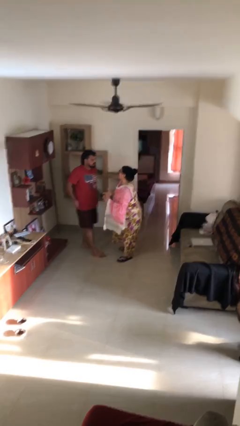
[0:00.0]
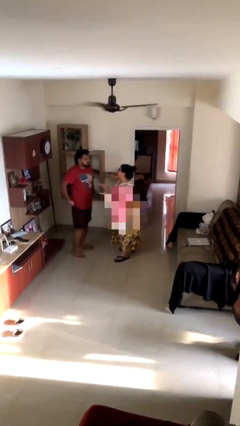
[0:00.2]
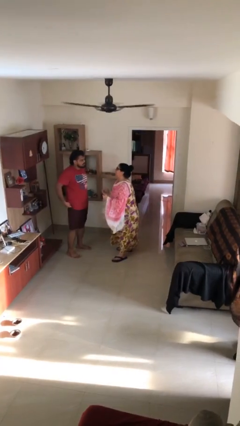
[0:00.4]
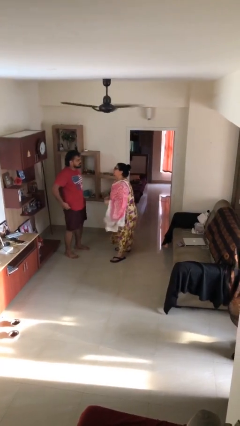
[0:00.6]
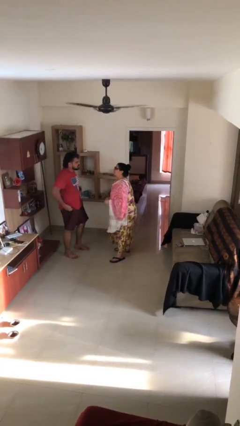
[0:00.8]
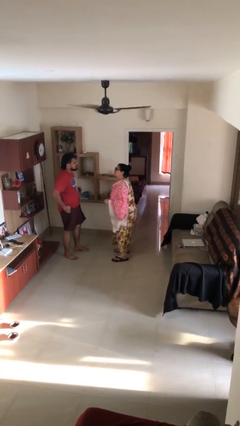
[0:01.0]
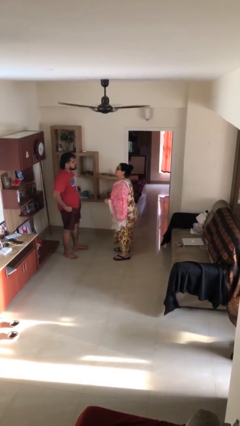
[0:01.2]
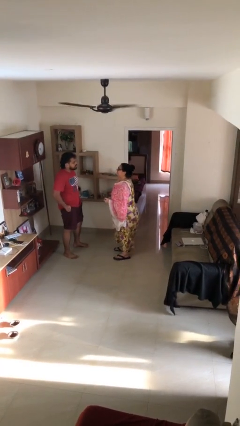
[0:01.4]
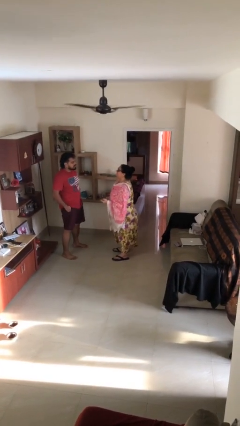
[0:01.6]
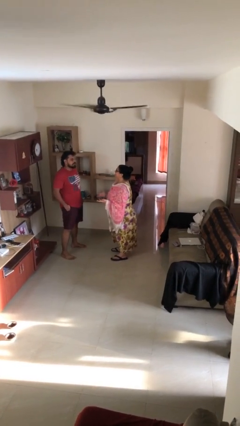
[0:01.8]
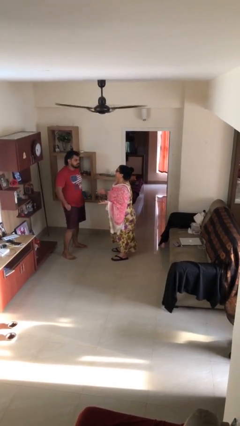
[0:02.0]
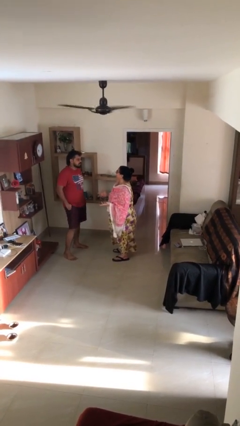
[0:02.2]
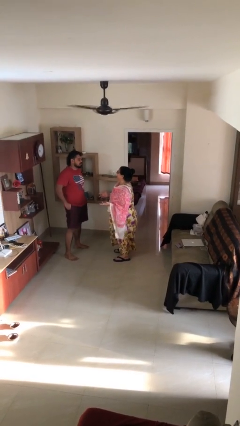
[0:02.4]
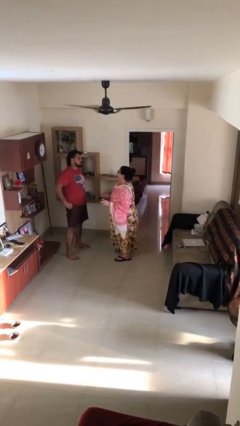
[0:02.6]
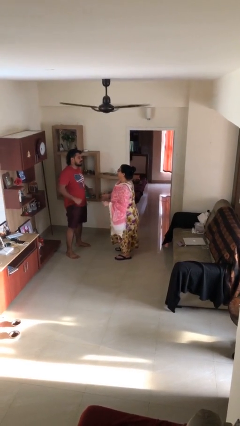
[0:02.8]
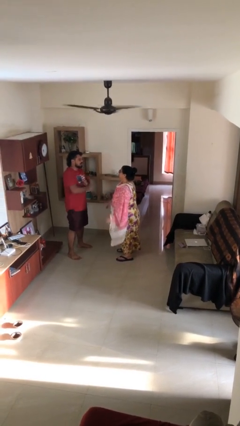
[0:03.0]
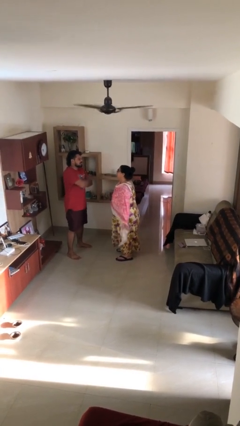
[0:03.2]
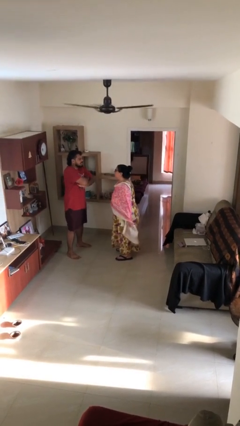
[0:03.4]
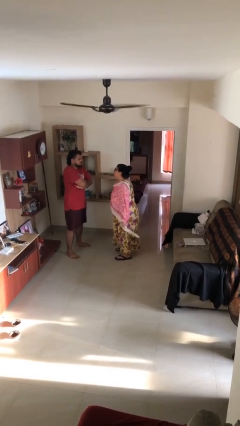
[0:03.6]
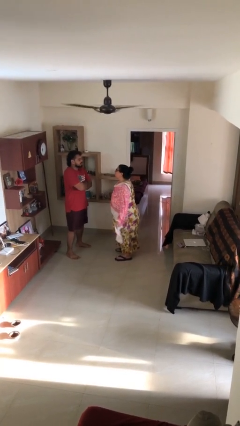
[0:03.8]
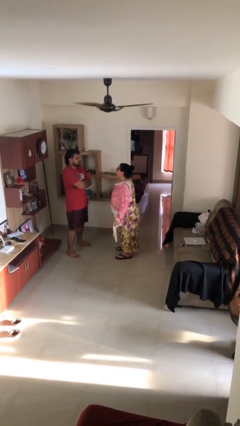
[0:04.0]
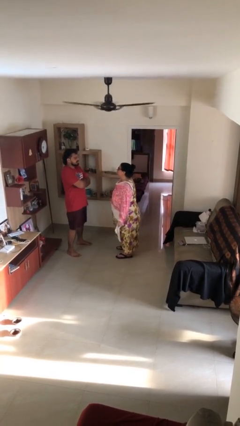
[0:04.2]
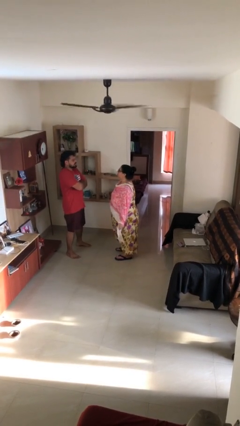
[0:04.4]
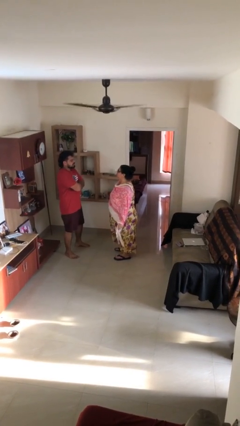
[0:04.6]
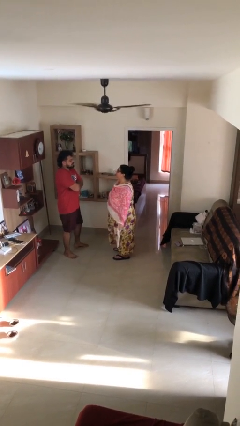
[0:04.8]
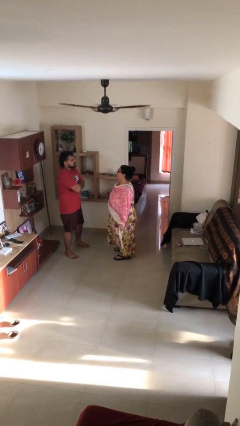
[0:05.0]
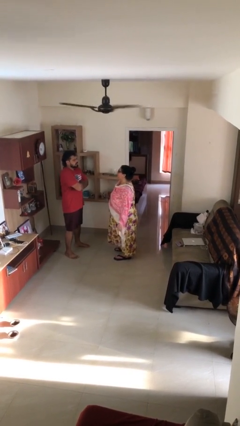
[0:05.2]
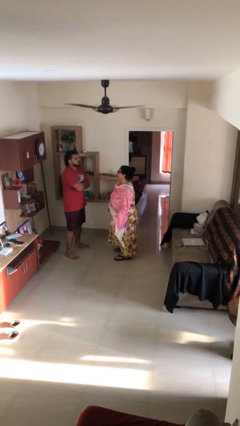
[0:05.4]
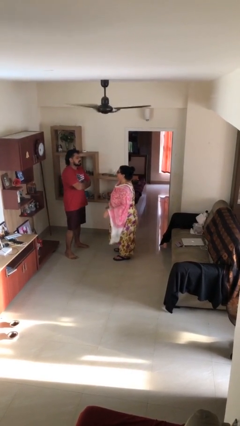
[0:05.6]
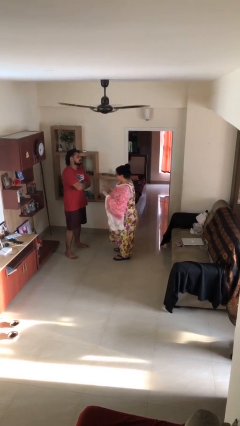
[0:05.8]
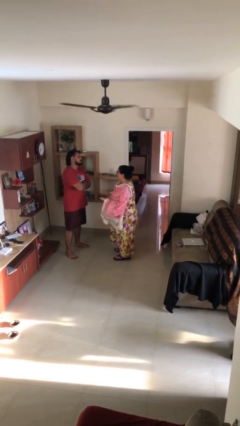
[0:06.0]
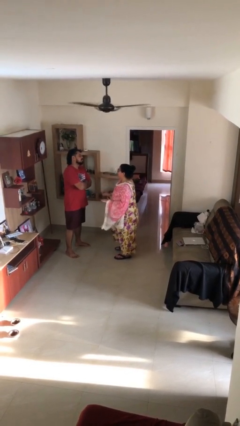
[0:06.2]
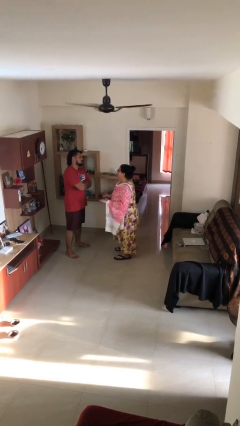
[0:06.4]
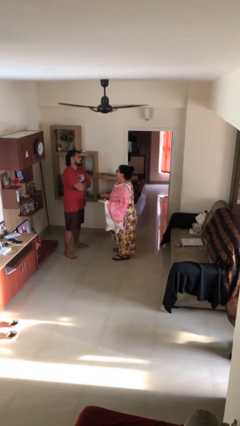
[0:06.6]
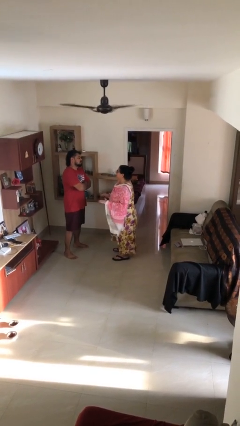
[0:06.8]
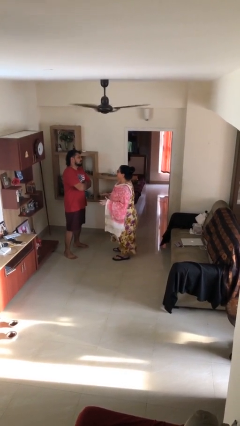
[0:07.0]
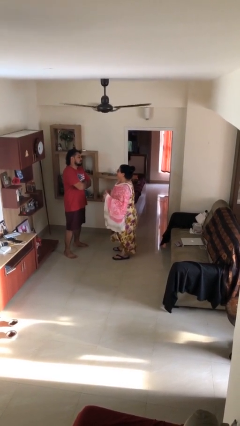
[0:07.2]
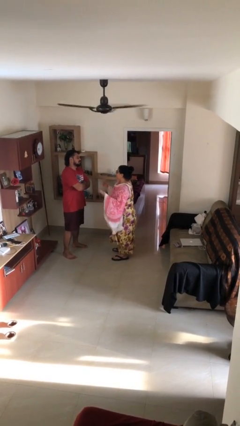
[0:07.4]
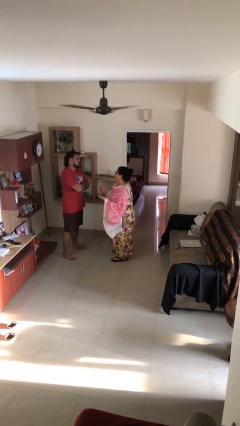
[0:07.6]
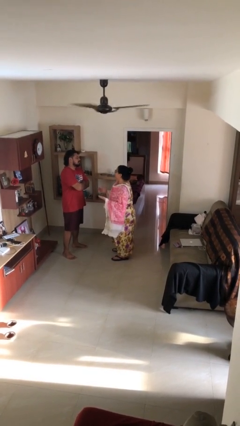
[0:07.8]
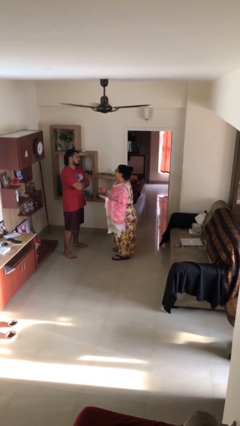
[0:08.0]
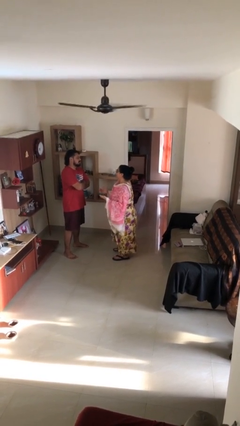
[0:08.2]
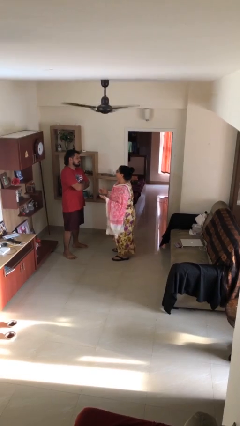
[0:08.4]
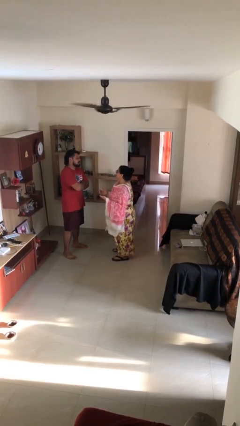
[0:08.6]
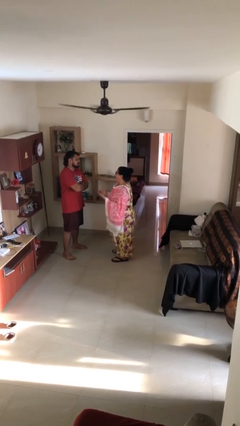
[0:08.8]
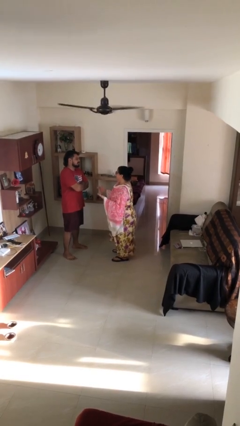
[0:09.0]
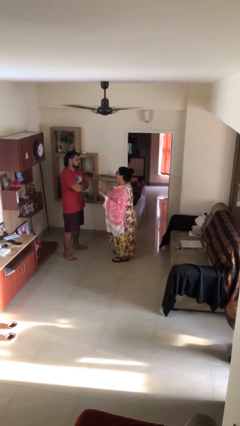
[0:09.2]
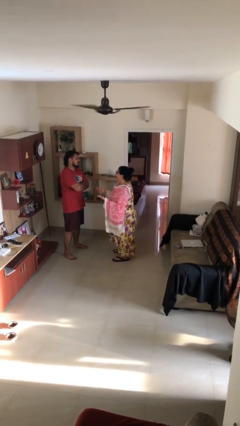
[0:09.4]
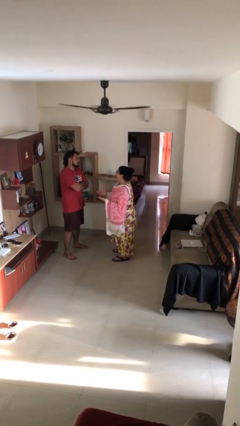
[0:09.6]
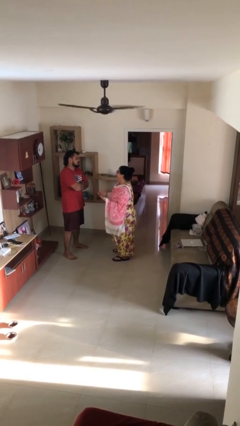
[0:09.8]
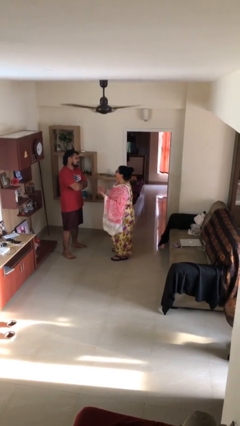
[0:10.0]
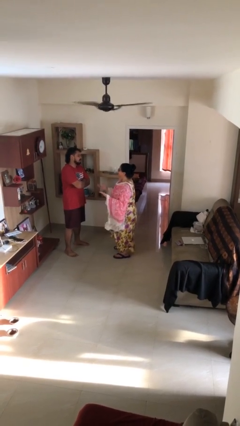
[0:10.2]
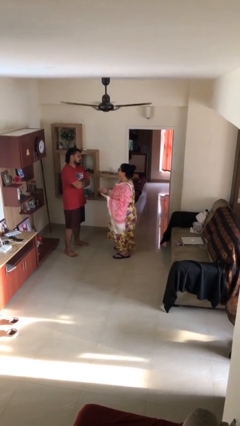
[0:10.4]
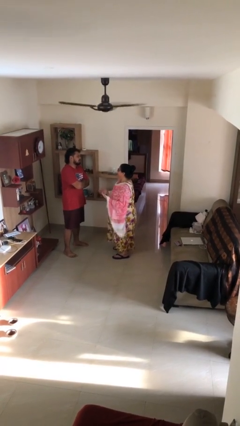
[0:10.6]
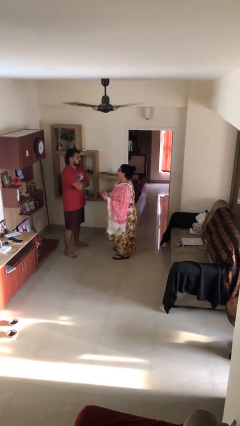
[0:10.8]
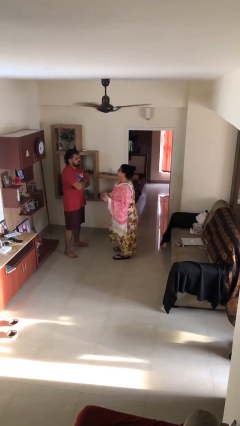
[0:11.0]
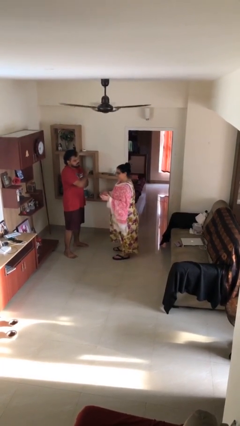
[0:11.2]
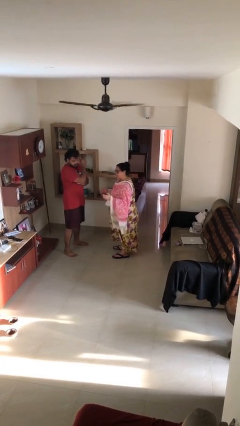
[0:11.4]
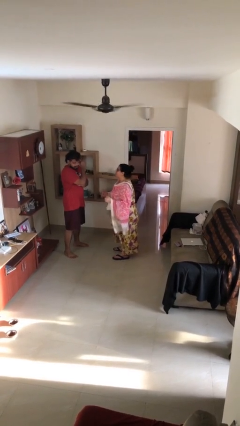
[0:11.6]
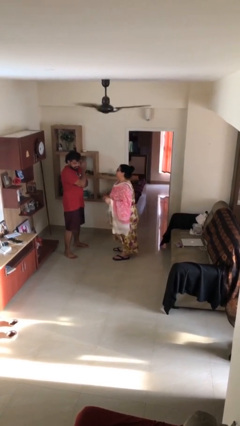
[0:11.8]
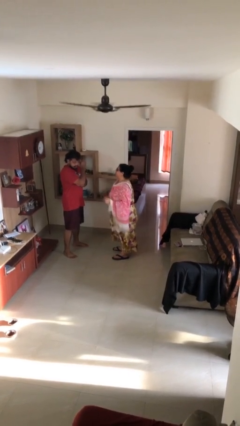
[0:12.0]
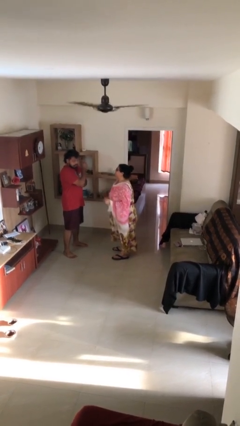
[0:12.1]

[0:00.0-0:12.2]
person talks to person

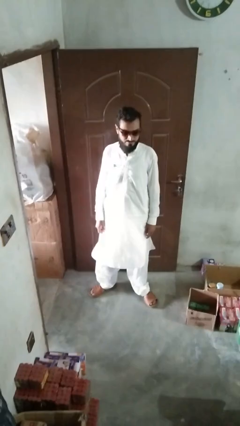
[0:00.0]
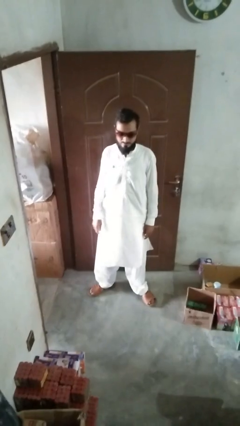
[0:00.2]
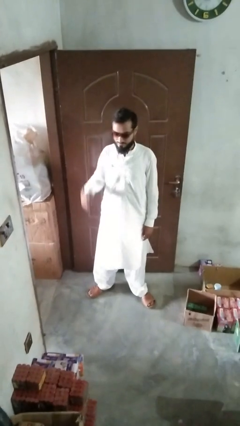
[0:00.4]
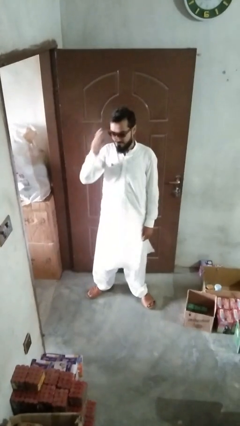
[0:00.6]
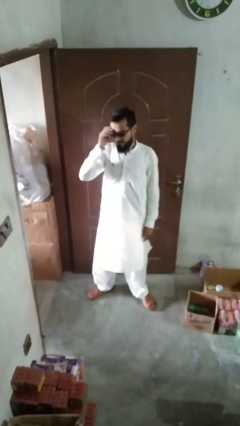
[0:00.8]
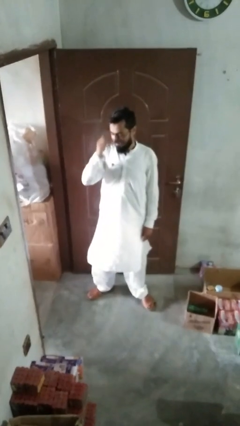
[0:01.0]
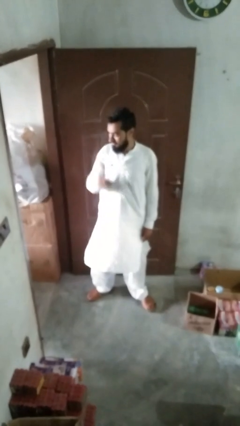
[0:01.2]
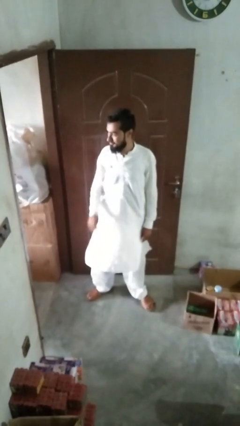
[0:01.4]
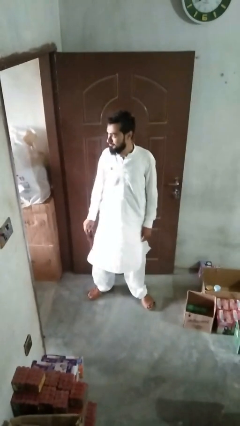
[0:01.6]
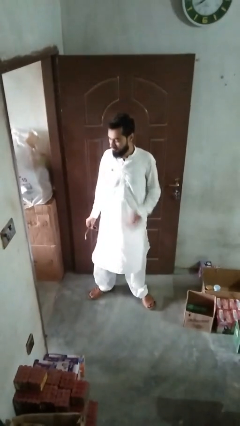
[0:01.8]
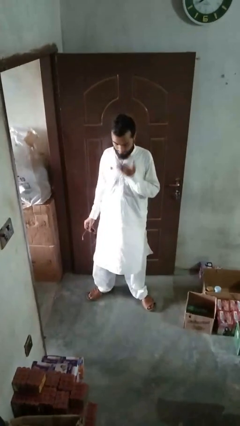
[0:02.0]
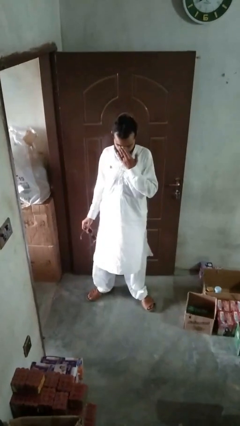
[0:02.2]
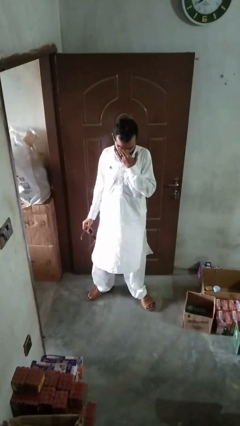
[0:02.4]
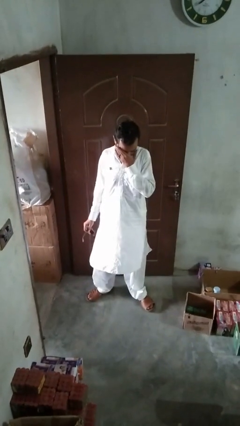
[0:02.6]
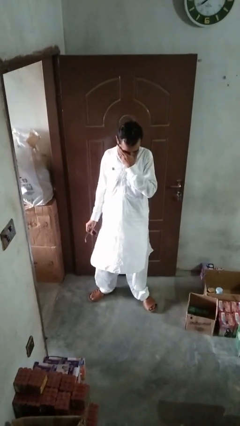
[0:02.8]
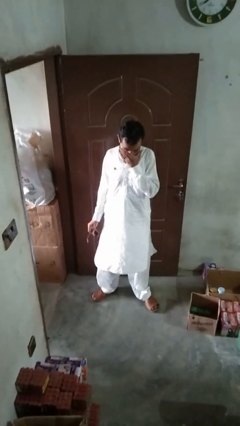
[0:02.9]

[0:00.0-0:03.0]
person takes off sunglasses

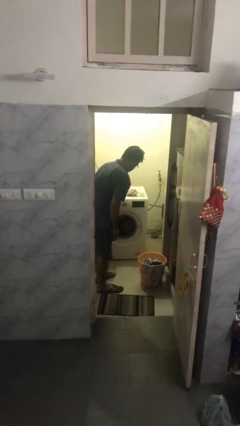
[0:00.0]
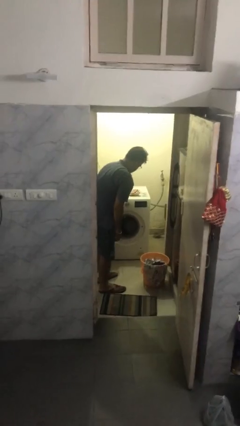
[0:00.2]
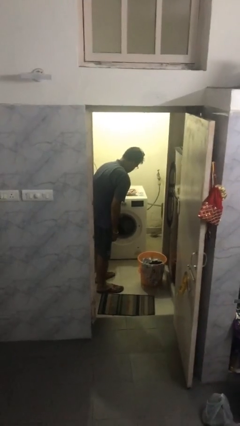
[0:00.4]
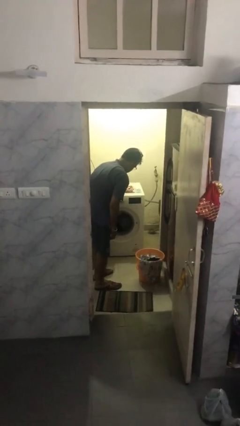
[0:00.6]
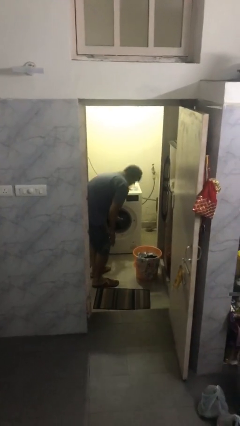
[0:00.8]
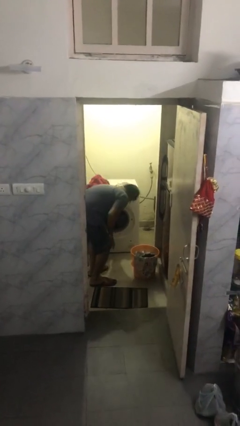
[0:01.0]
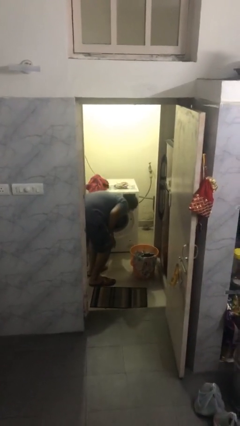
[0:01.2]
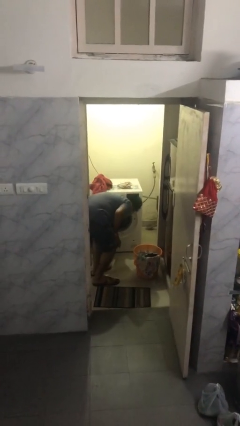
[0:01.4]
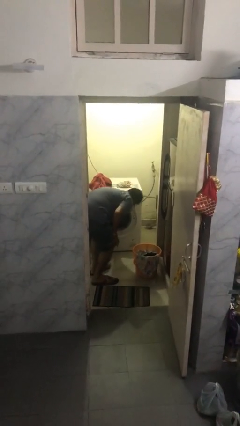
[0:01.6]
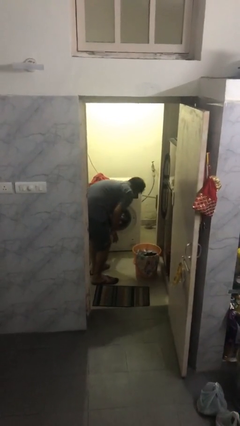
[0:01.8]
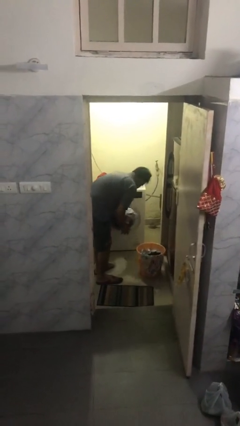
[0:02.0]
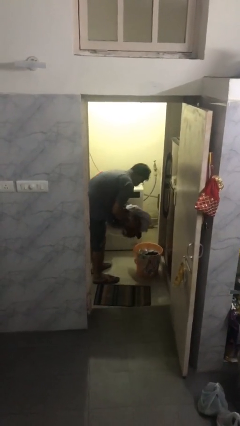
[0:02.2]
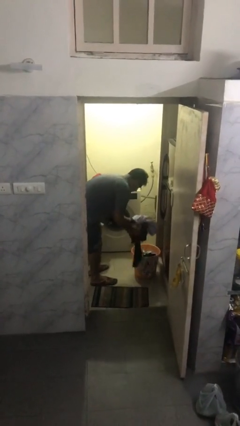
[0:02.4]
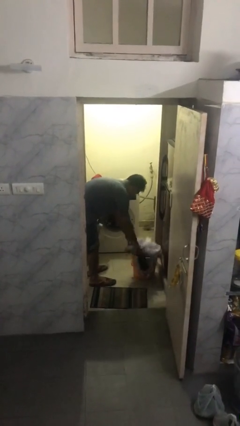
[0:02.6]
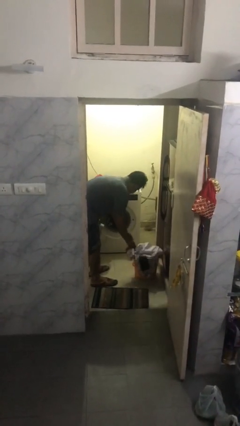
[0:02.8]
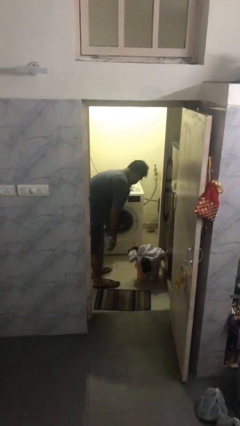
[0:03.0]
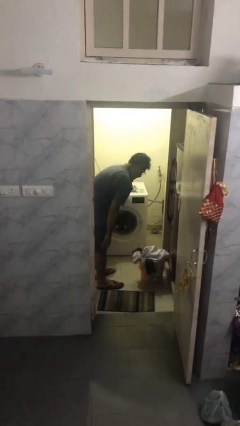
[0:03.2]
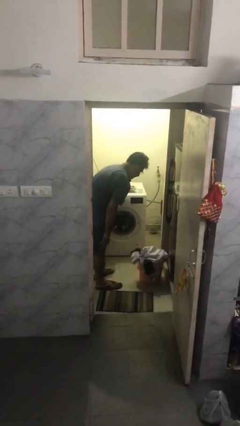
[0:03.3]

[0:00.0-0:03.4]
person unloads clotheswasher
